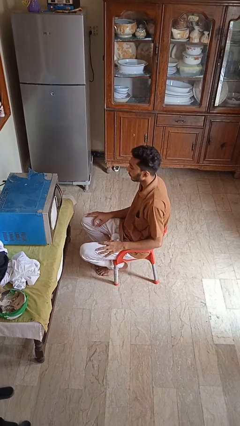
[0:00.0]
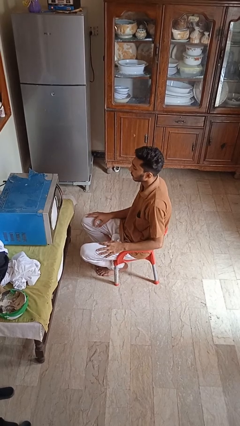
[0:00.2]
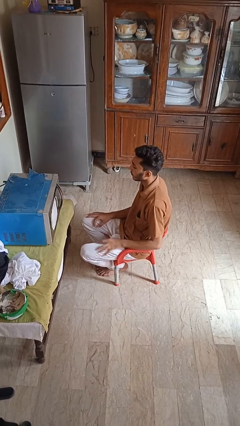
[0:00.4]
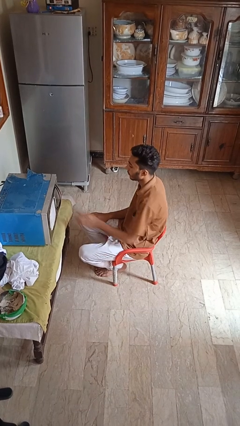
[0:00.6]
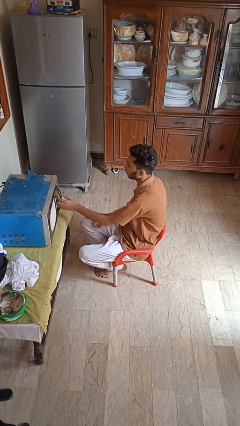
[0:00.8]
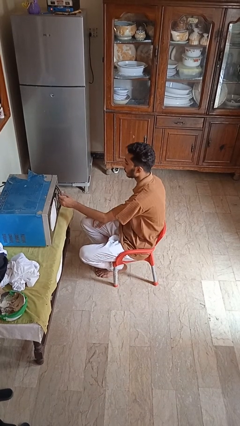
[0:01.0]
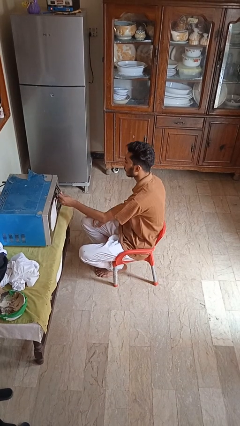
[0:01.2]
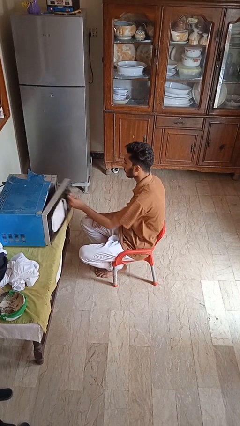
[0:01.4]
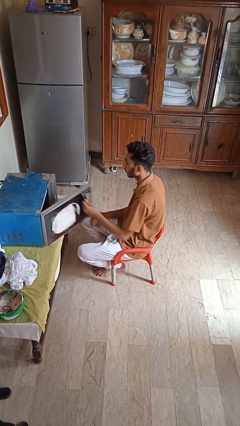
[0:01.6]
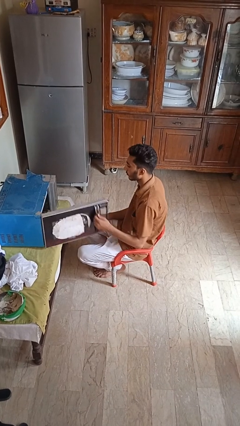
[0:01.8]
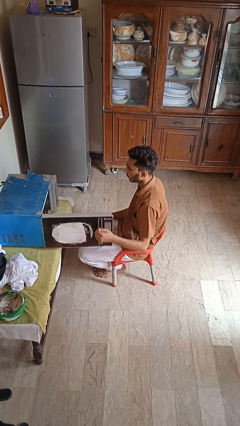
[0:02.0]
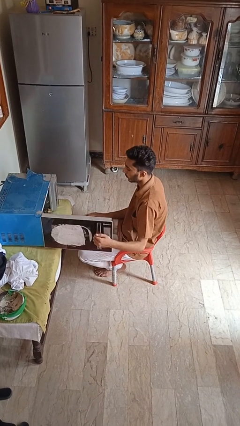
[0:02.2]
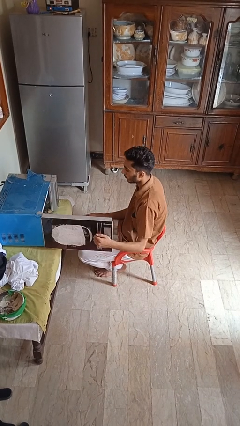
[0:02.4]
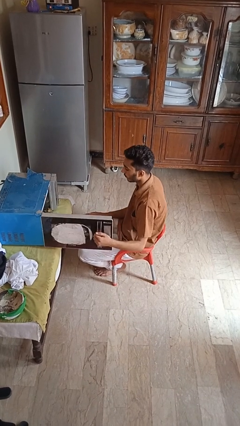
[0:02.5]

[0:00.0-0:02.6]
person opens microwave

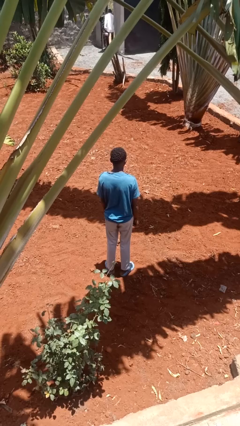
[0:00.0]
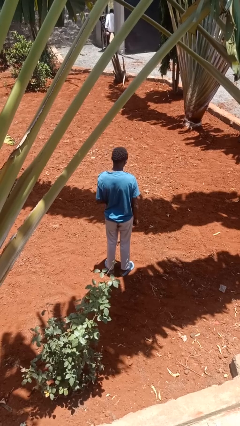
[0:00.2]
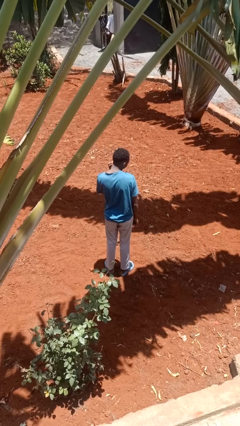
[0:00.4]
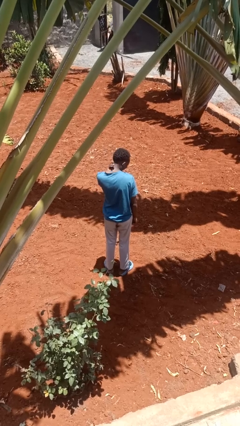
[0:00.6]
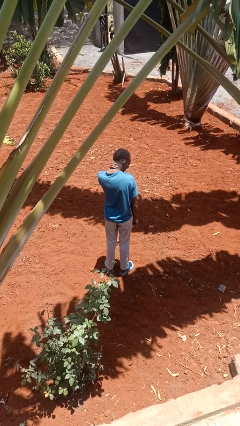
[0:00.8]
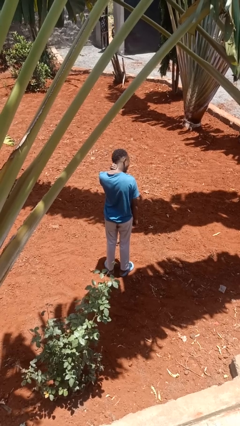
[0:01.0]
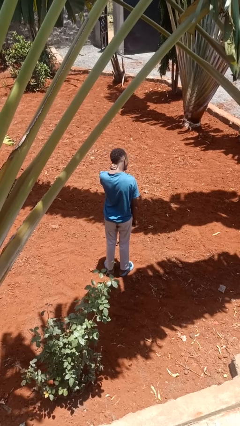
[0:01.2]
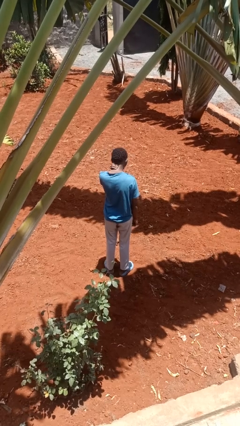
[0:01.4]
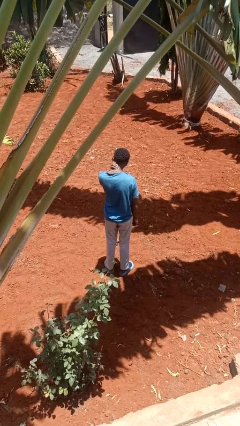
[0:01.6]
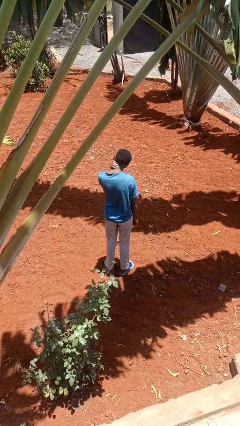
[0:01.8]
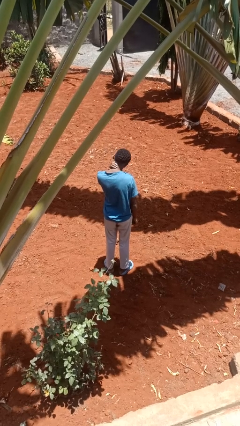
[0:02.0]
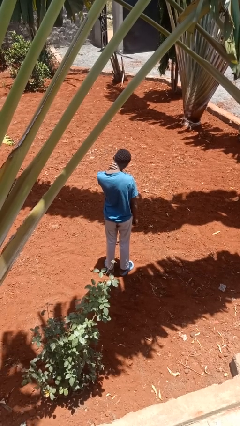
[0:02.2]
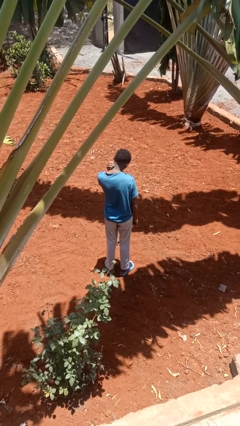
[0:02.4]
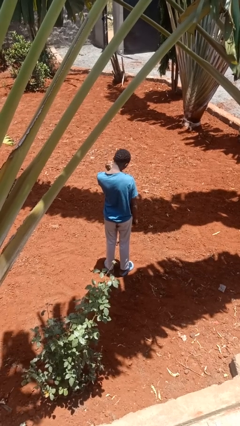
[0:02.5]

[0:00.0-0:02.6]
person rubs neck

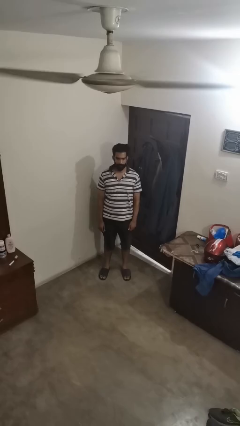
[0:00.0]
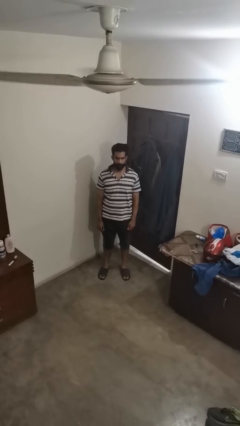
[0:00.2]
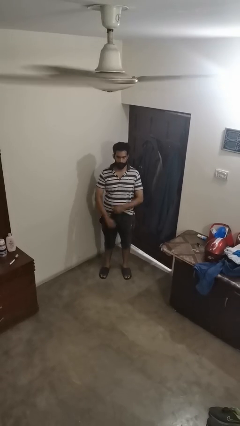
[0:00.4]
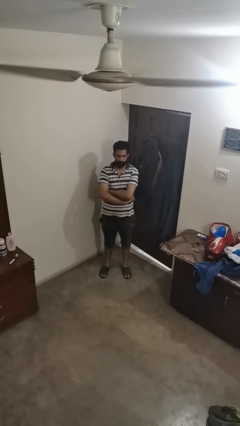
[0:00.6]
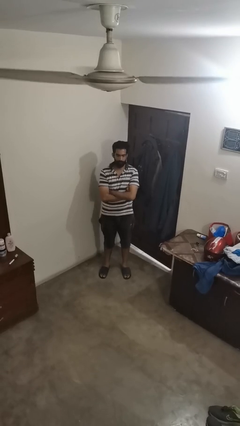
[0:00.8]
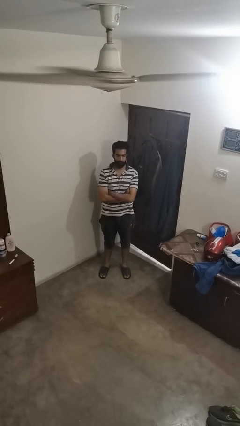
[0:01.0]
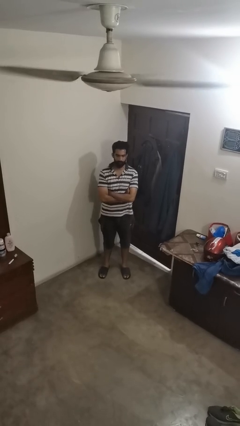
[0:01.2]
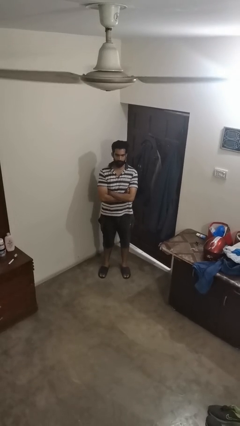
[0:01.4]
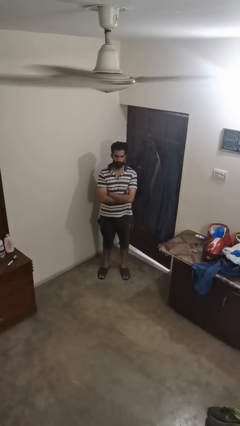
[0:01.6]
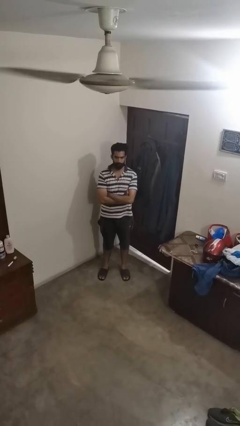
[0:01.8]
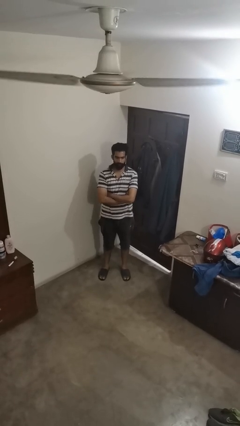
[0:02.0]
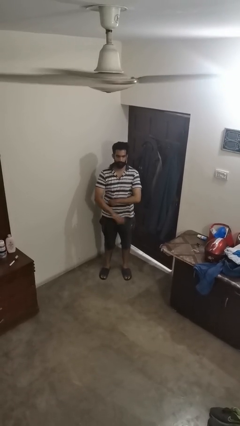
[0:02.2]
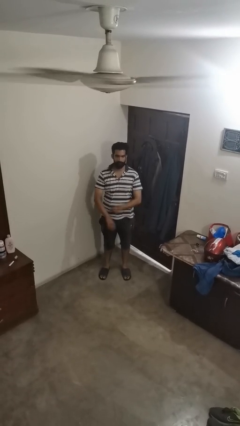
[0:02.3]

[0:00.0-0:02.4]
person crosses arms

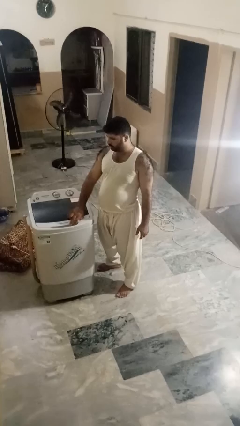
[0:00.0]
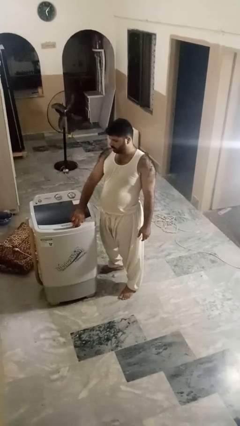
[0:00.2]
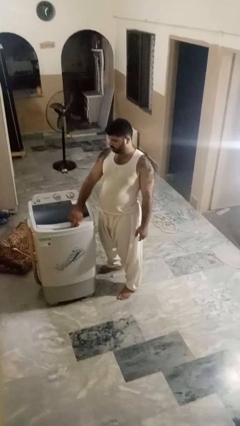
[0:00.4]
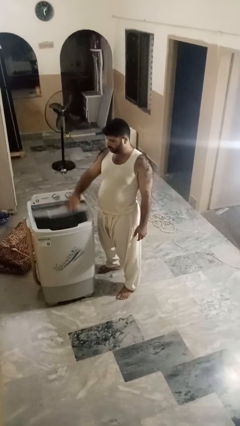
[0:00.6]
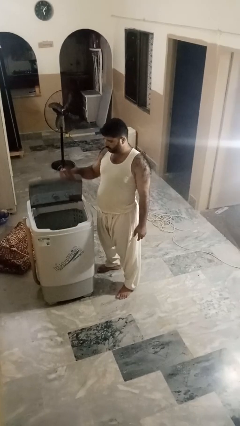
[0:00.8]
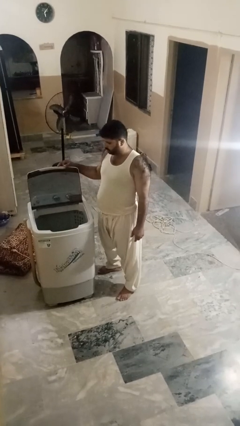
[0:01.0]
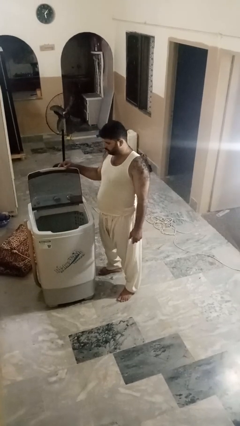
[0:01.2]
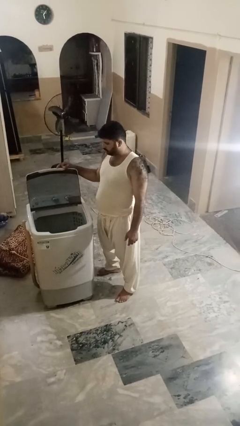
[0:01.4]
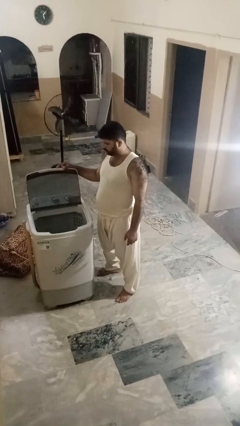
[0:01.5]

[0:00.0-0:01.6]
person opens clothes washer

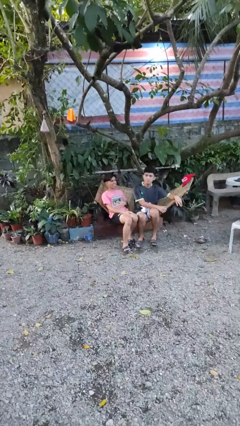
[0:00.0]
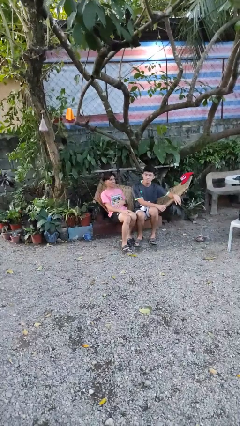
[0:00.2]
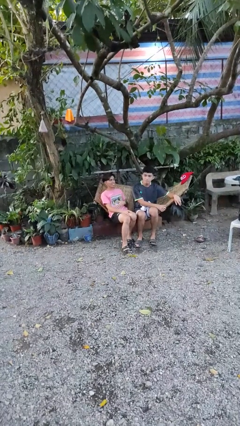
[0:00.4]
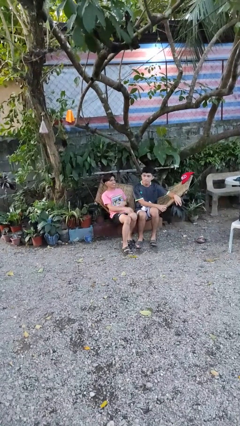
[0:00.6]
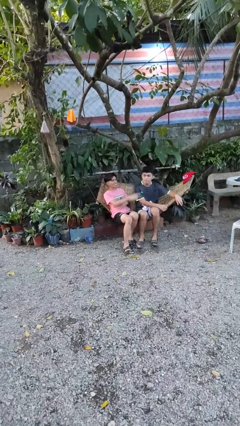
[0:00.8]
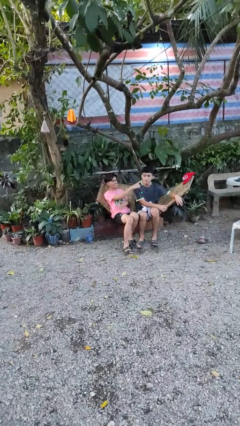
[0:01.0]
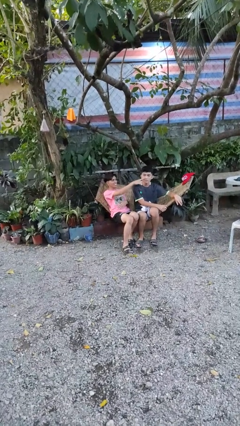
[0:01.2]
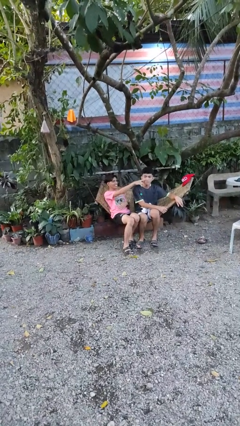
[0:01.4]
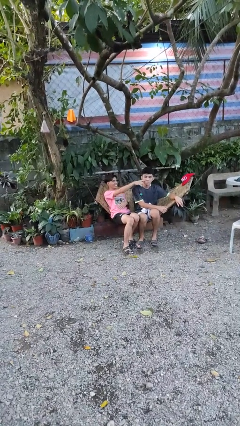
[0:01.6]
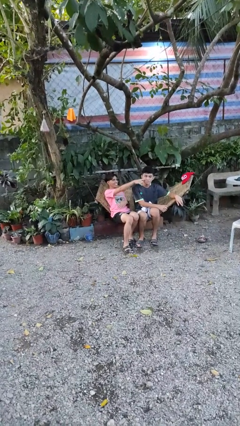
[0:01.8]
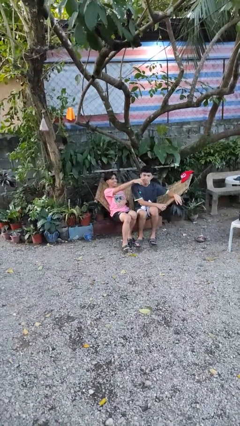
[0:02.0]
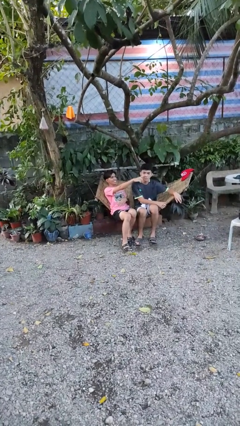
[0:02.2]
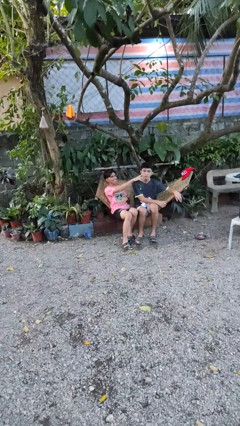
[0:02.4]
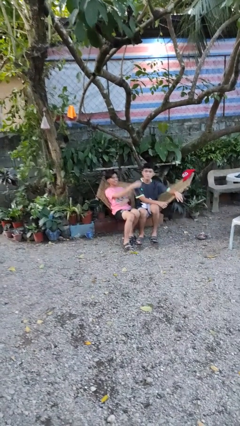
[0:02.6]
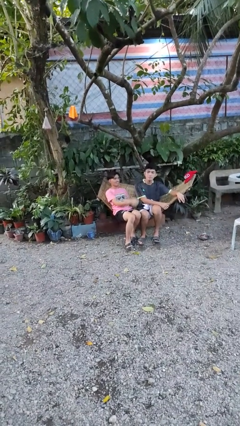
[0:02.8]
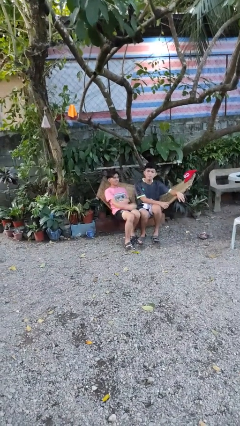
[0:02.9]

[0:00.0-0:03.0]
person touches face of person

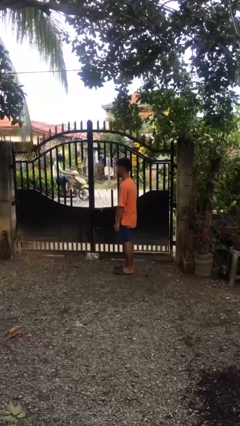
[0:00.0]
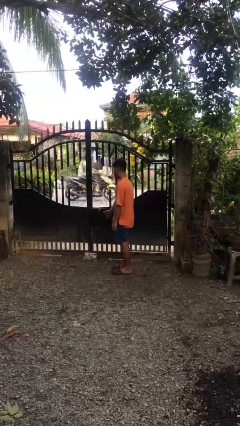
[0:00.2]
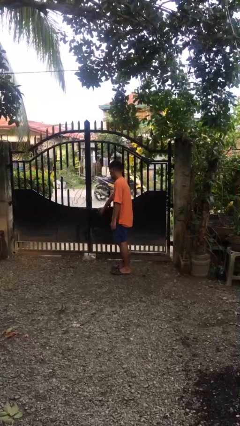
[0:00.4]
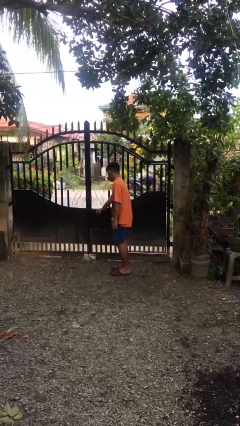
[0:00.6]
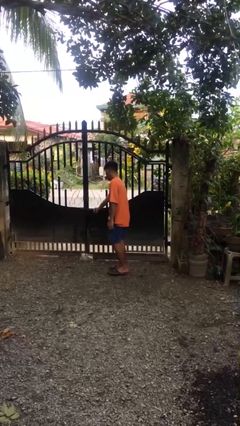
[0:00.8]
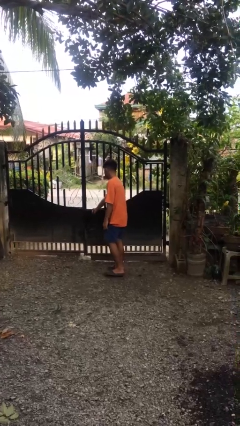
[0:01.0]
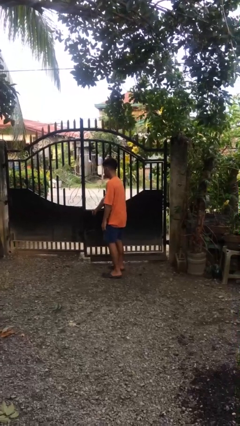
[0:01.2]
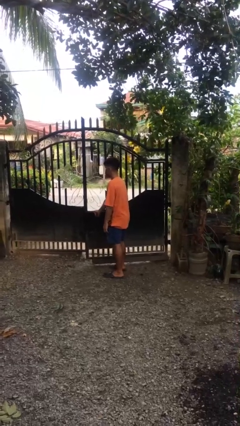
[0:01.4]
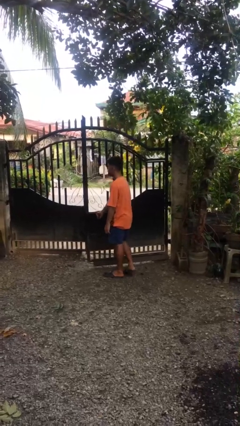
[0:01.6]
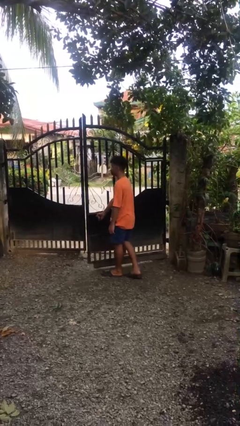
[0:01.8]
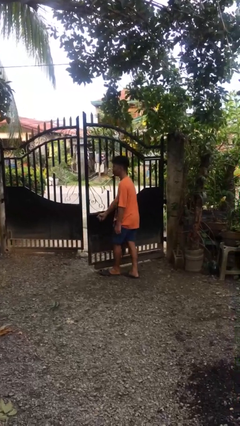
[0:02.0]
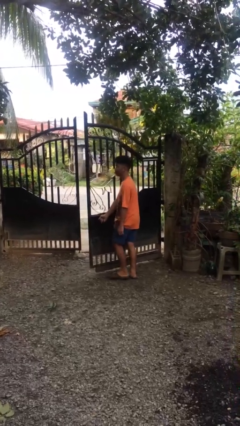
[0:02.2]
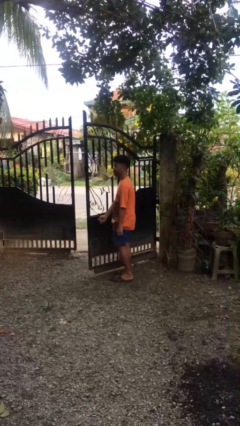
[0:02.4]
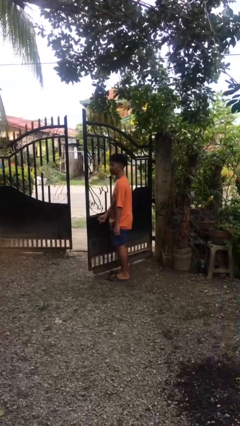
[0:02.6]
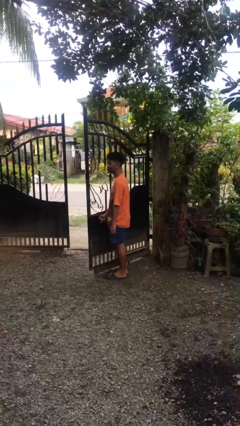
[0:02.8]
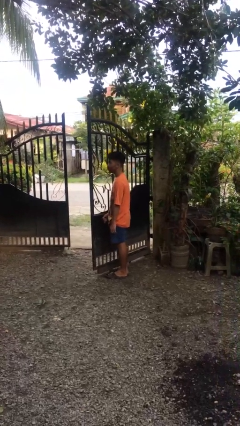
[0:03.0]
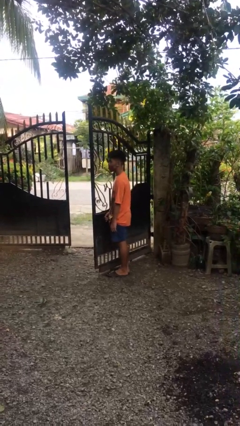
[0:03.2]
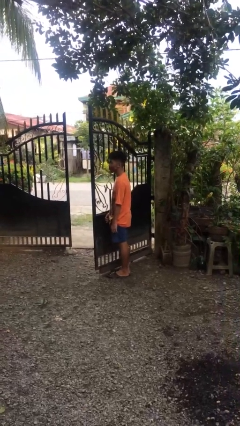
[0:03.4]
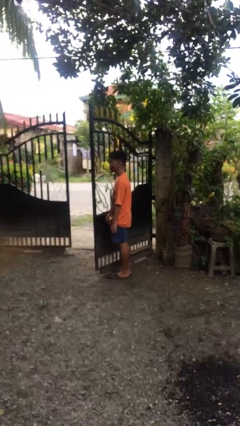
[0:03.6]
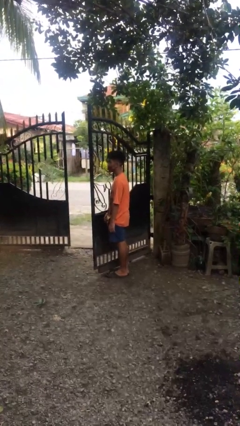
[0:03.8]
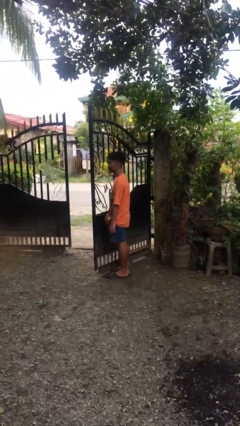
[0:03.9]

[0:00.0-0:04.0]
person opens gate

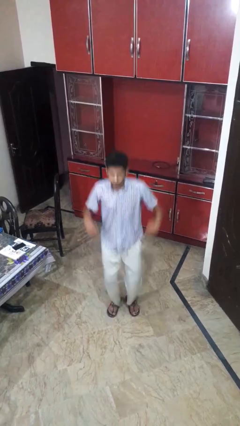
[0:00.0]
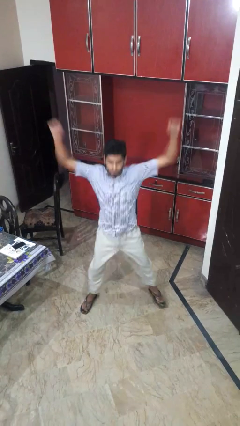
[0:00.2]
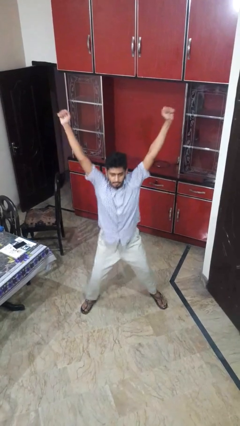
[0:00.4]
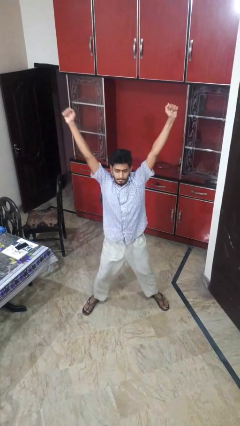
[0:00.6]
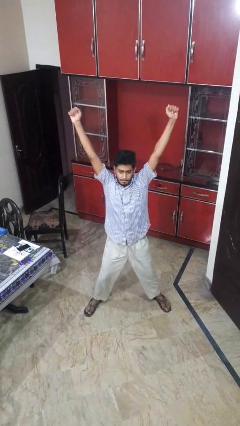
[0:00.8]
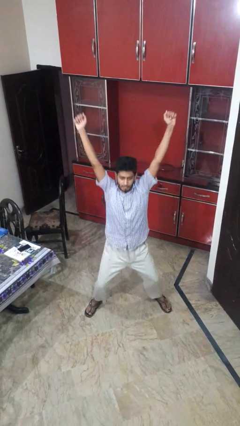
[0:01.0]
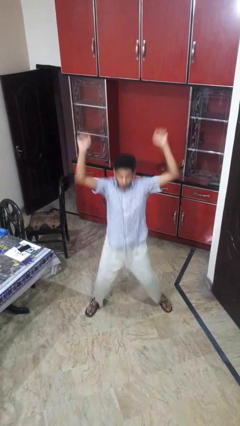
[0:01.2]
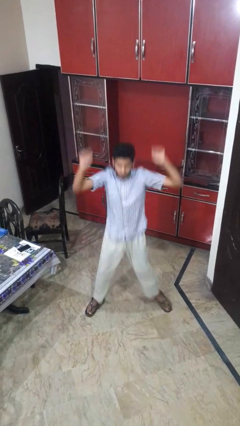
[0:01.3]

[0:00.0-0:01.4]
person exercises with jumping jacks
